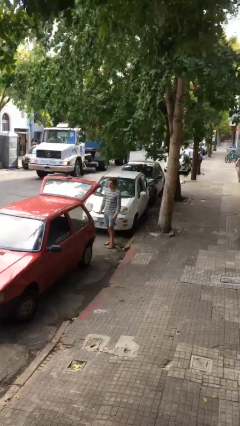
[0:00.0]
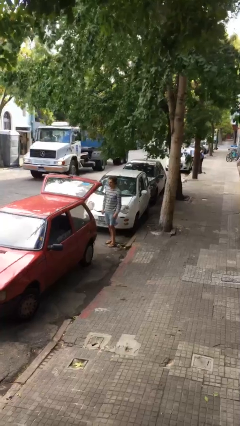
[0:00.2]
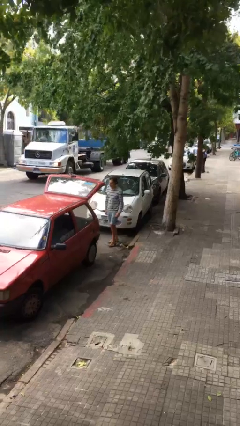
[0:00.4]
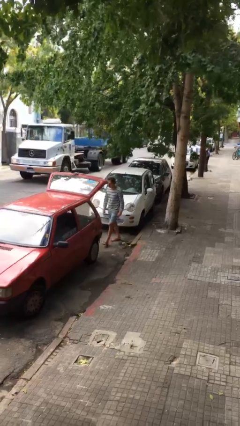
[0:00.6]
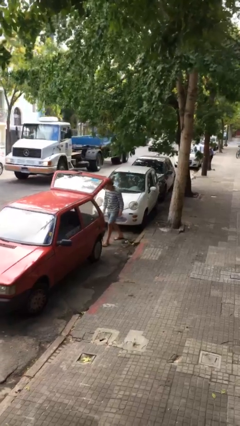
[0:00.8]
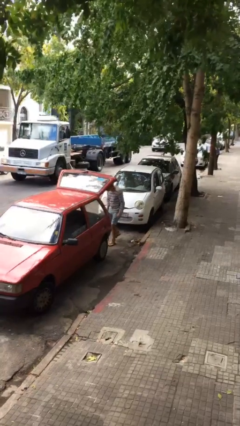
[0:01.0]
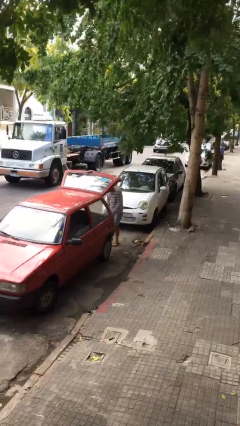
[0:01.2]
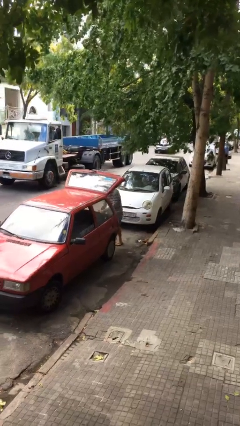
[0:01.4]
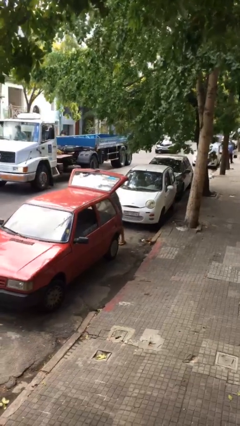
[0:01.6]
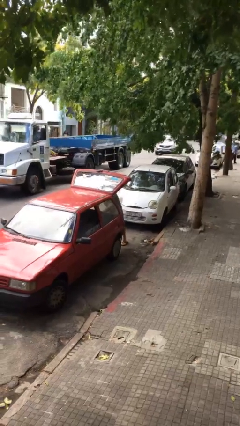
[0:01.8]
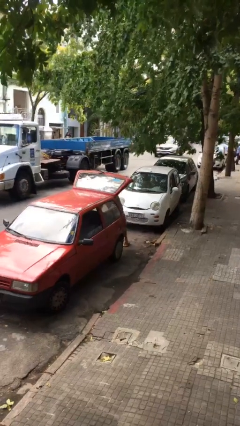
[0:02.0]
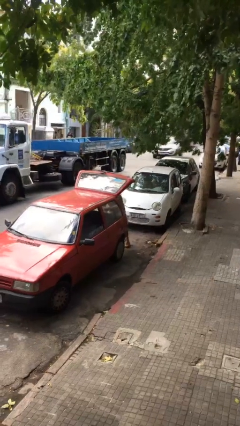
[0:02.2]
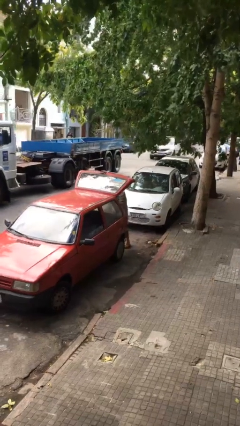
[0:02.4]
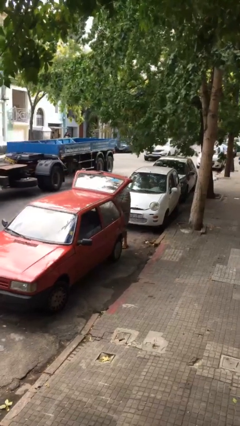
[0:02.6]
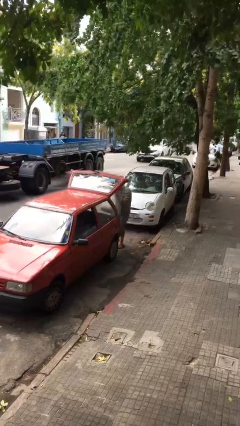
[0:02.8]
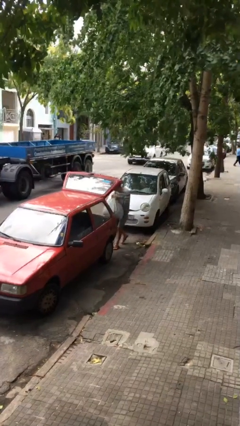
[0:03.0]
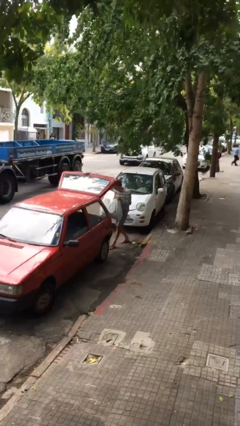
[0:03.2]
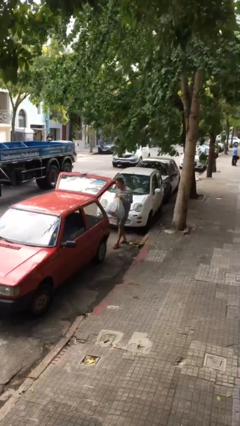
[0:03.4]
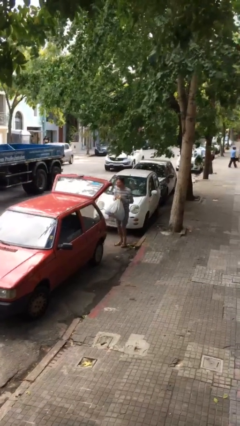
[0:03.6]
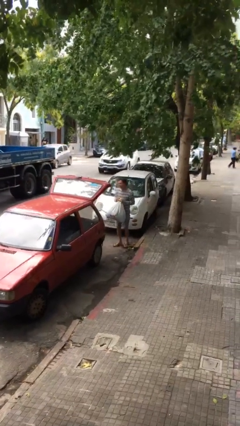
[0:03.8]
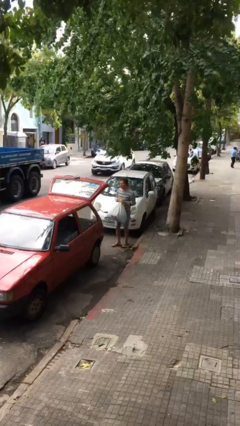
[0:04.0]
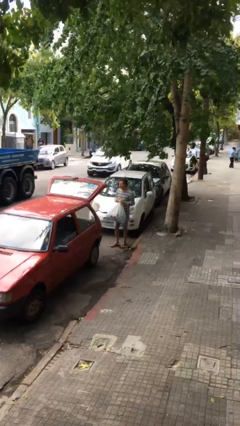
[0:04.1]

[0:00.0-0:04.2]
person unloads car

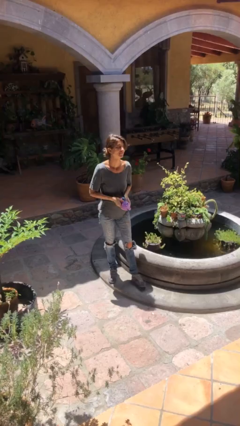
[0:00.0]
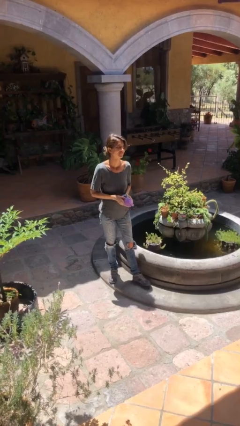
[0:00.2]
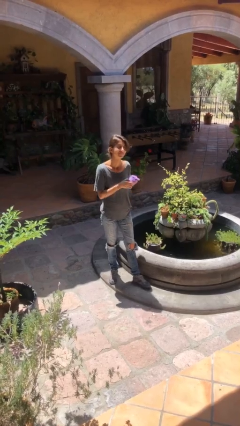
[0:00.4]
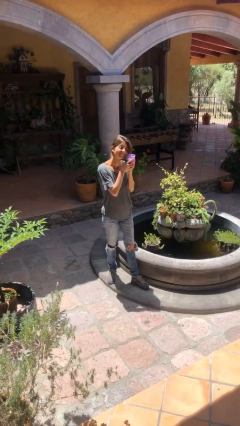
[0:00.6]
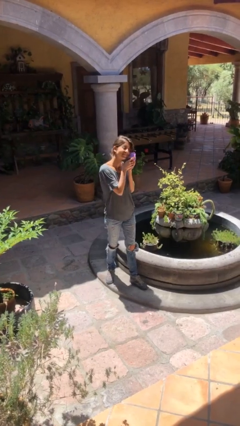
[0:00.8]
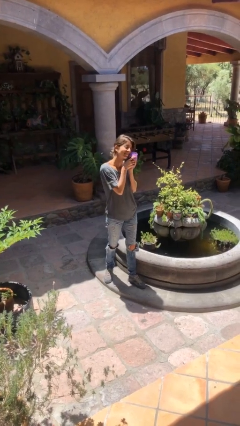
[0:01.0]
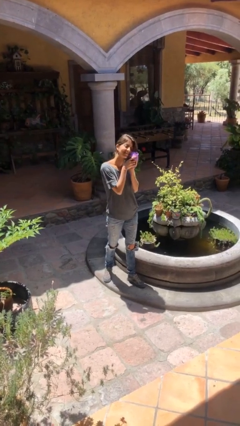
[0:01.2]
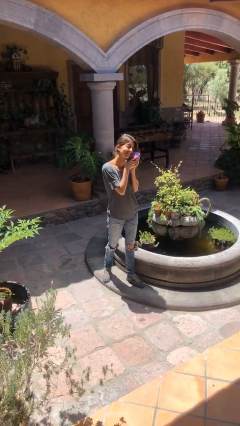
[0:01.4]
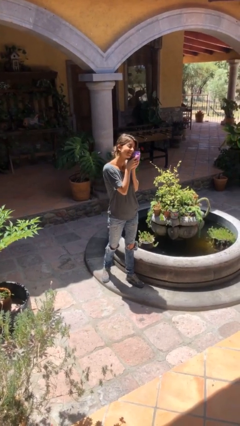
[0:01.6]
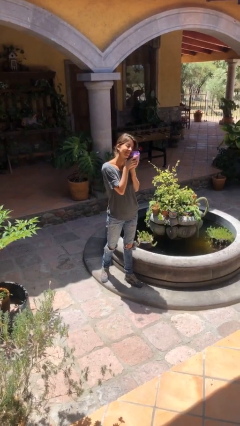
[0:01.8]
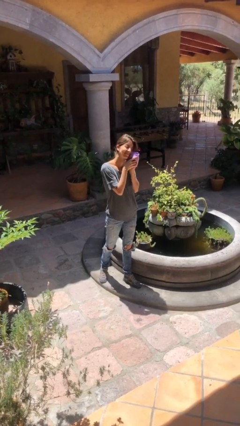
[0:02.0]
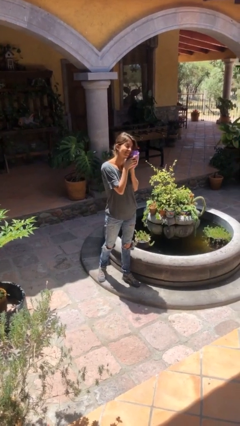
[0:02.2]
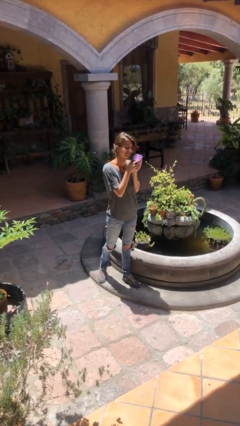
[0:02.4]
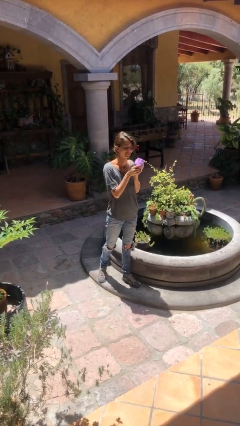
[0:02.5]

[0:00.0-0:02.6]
person hugs stuffed animal

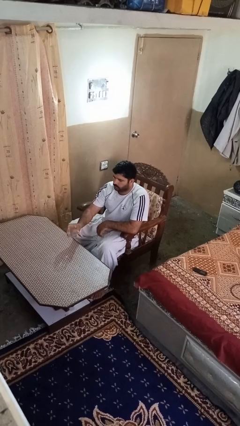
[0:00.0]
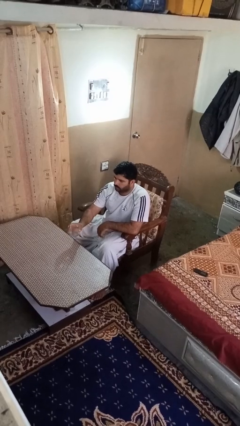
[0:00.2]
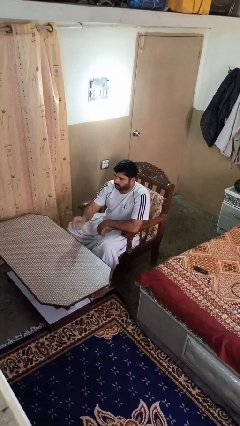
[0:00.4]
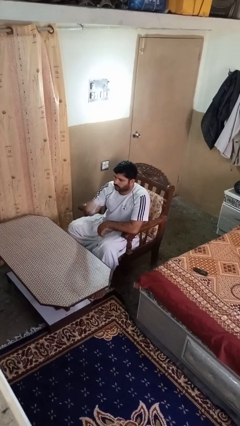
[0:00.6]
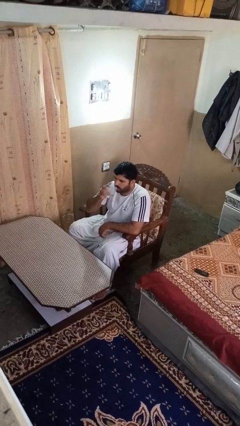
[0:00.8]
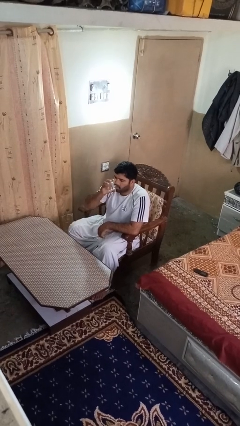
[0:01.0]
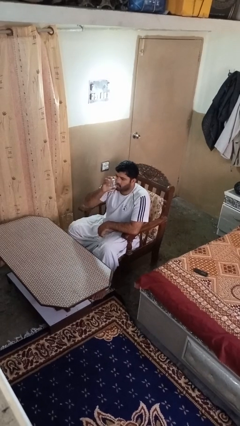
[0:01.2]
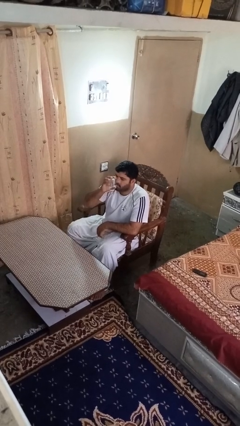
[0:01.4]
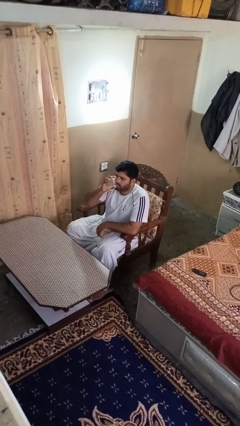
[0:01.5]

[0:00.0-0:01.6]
person drinks from shotglass

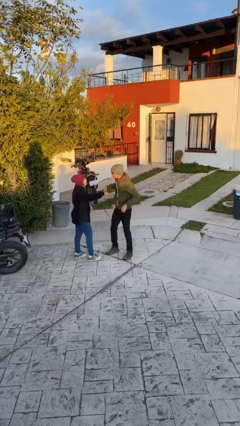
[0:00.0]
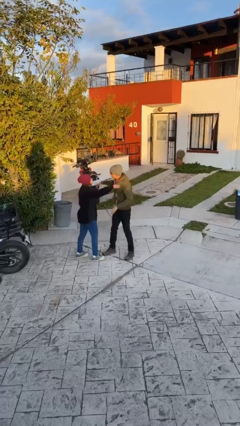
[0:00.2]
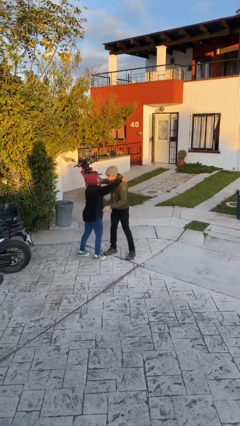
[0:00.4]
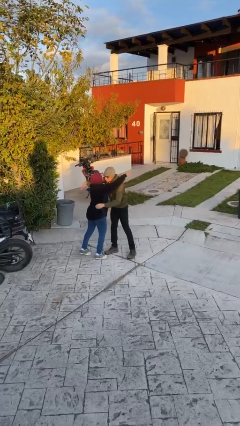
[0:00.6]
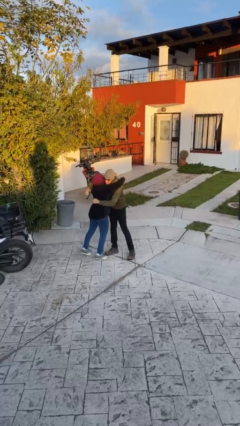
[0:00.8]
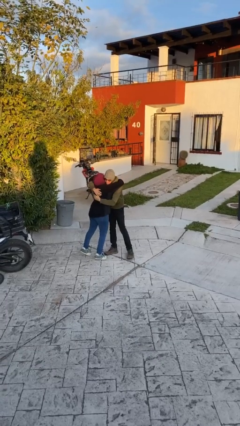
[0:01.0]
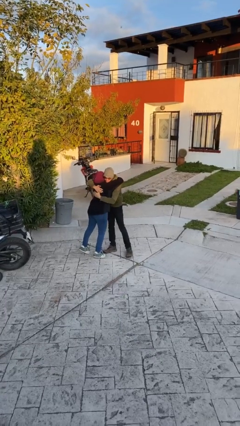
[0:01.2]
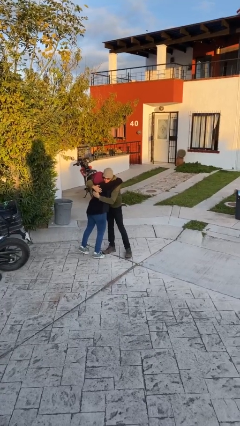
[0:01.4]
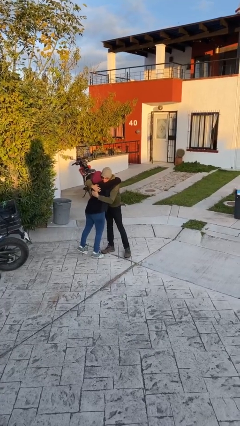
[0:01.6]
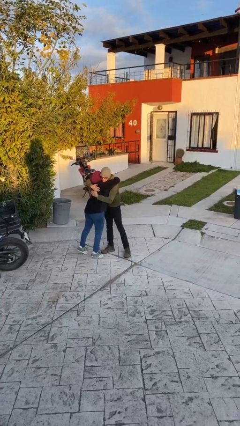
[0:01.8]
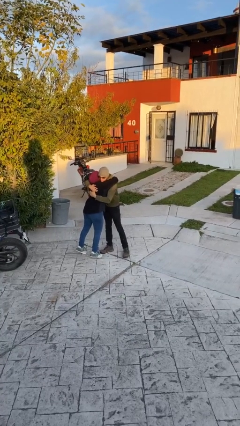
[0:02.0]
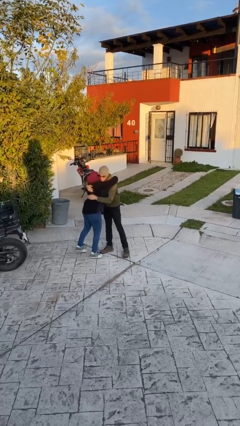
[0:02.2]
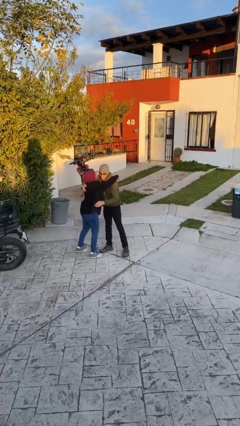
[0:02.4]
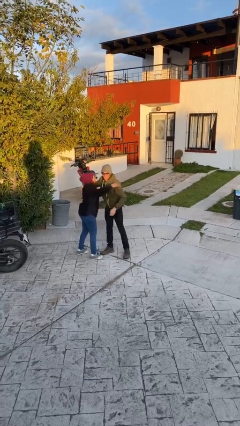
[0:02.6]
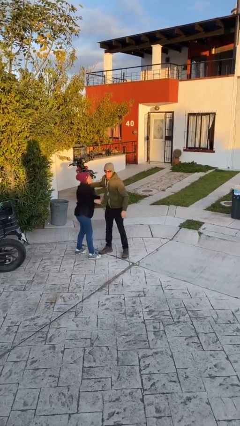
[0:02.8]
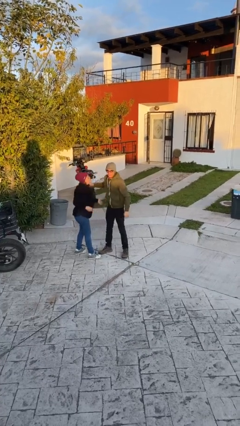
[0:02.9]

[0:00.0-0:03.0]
person embraces person

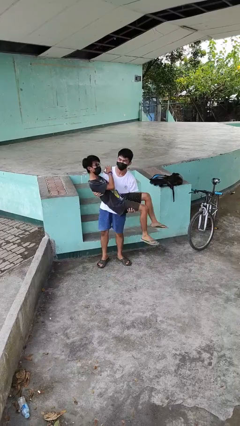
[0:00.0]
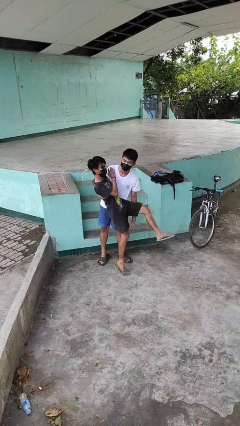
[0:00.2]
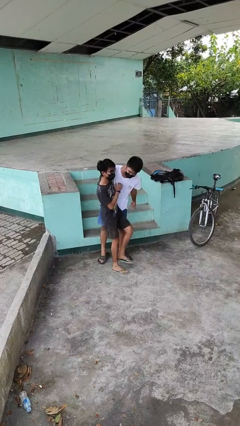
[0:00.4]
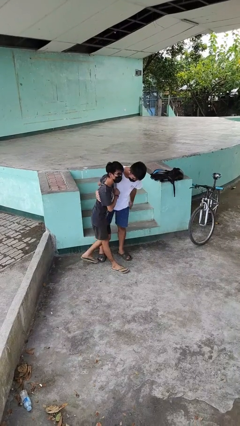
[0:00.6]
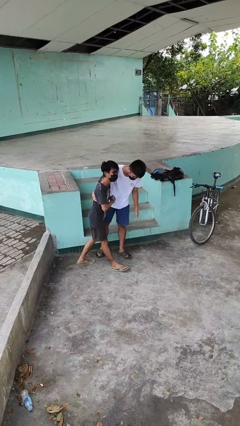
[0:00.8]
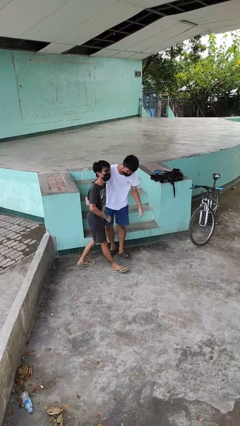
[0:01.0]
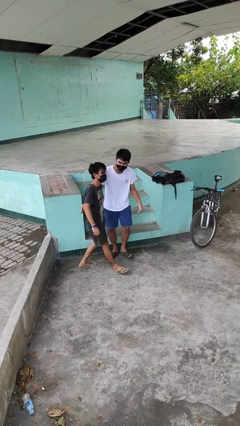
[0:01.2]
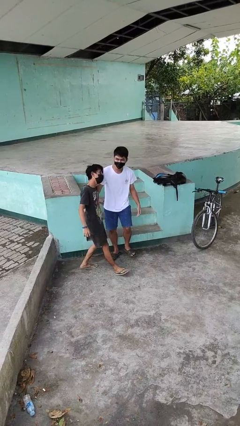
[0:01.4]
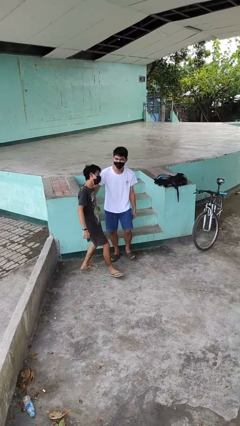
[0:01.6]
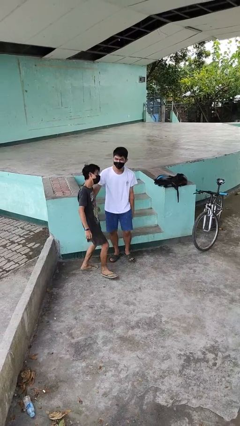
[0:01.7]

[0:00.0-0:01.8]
person puts down person

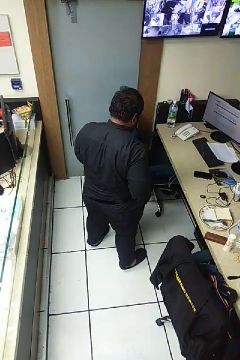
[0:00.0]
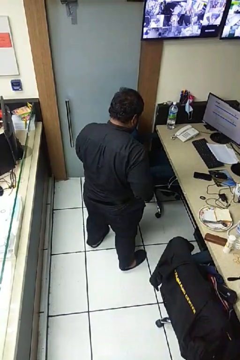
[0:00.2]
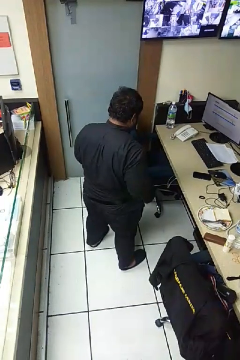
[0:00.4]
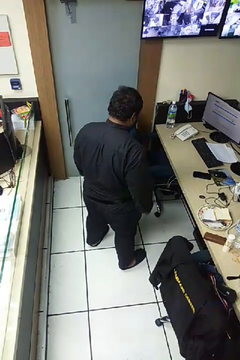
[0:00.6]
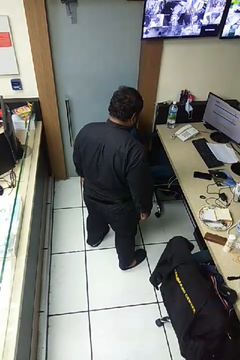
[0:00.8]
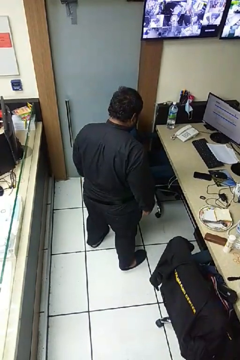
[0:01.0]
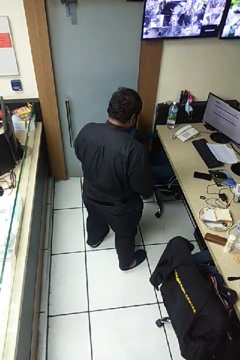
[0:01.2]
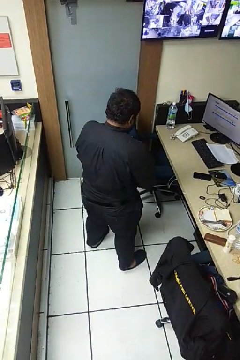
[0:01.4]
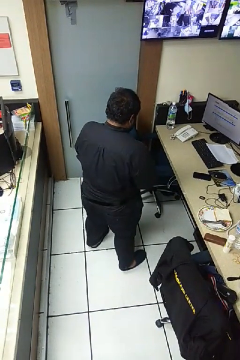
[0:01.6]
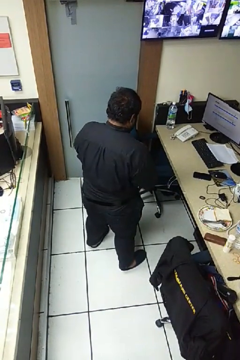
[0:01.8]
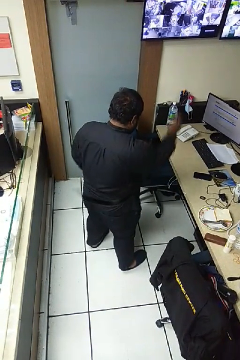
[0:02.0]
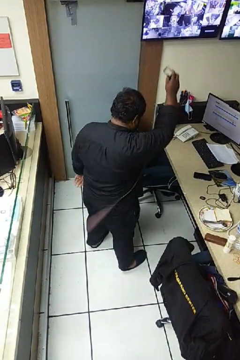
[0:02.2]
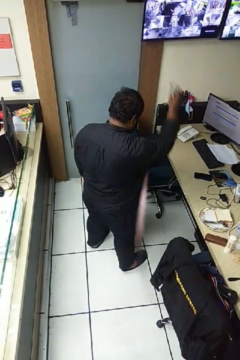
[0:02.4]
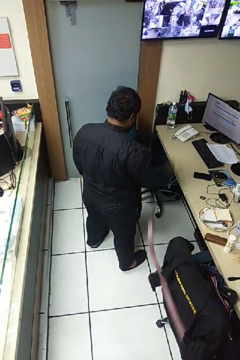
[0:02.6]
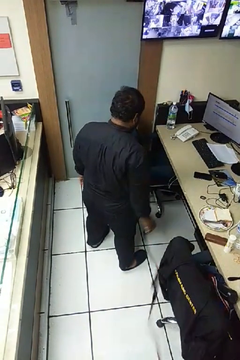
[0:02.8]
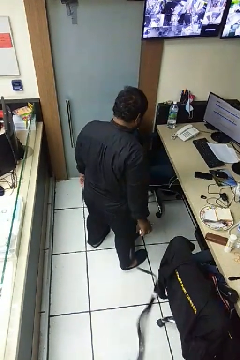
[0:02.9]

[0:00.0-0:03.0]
person takes off belt

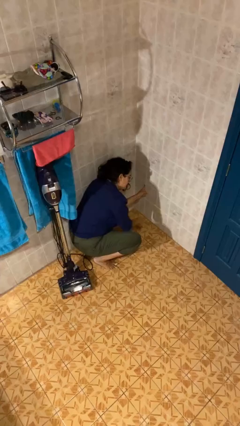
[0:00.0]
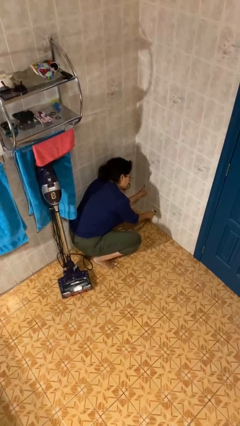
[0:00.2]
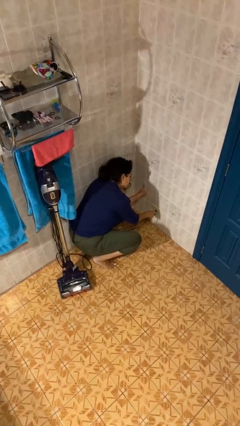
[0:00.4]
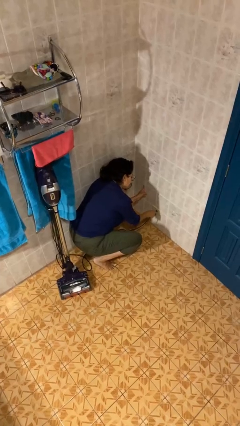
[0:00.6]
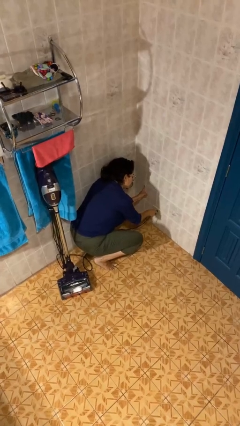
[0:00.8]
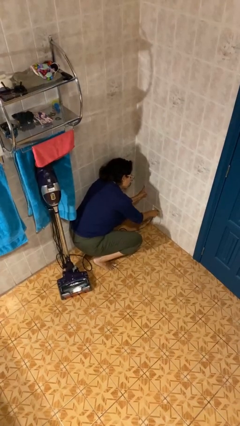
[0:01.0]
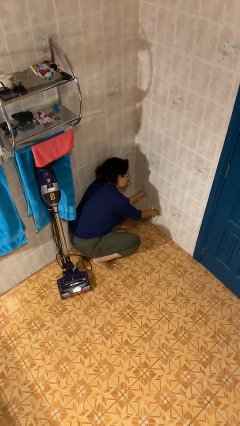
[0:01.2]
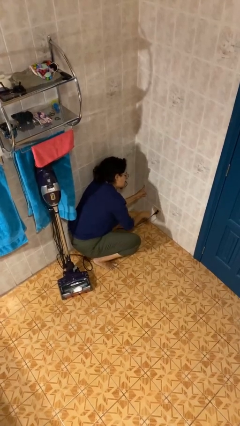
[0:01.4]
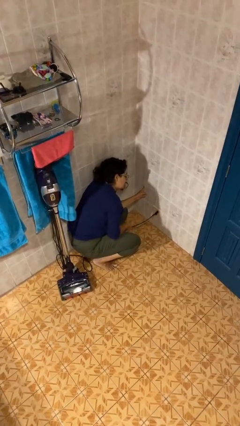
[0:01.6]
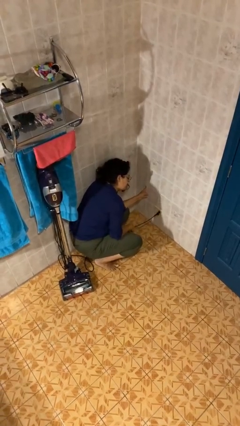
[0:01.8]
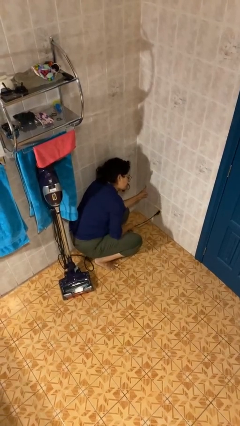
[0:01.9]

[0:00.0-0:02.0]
person plugs into electrical socket
